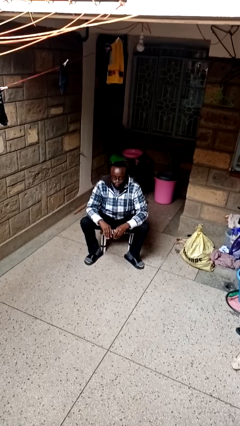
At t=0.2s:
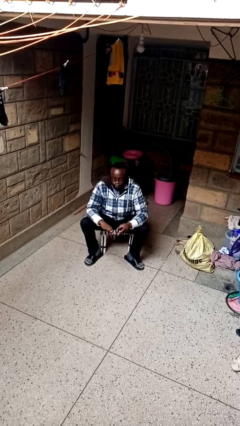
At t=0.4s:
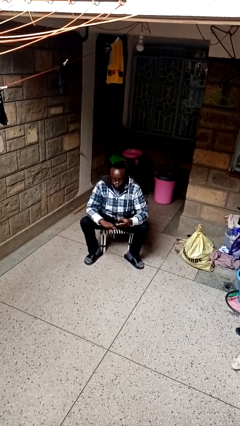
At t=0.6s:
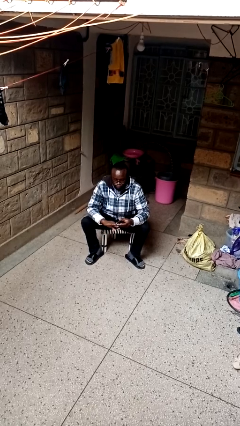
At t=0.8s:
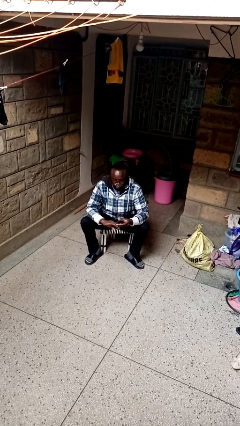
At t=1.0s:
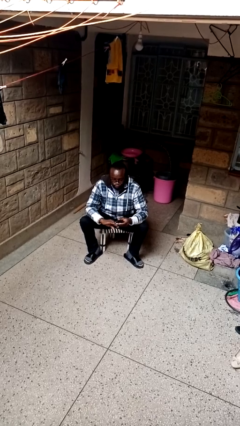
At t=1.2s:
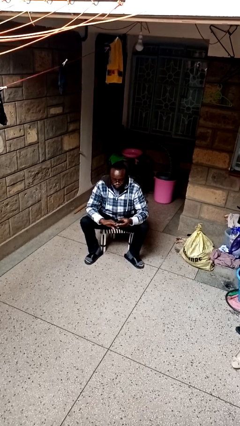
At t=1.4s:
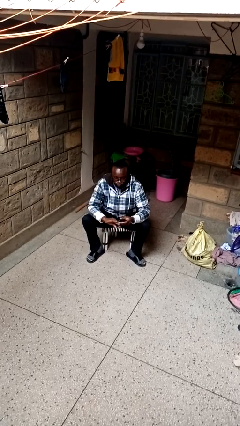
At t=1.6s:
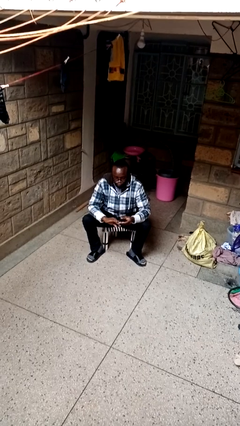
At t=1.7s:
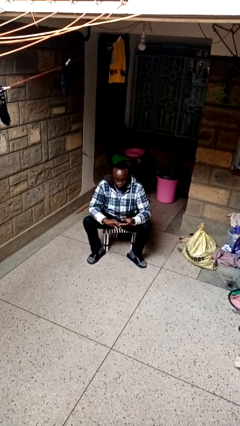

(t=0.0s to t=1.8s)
person clips fingernails

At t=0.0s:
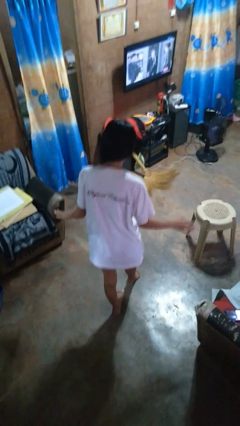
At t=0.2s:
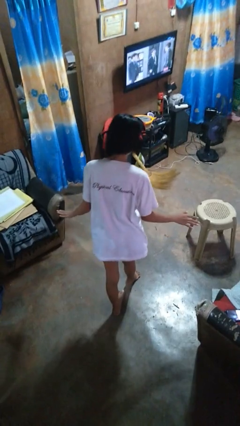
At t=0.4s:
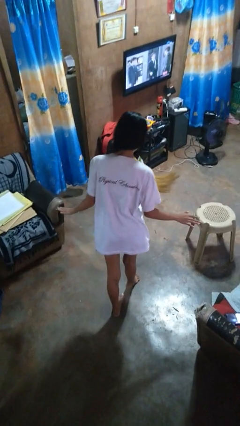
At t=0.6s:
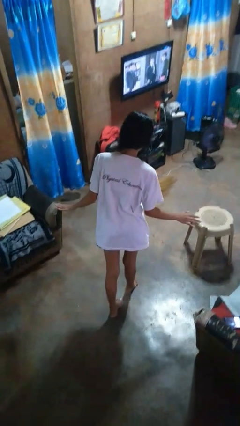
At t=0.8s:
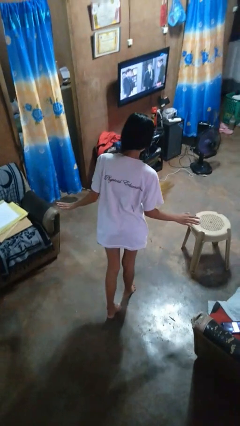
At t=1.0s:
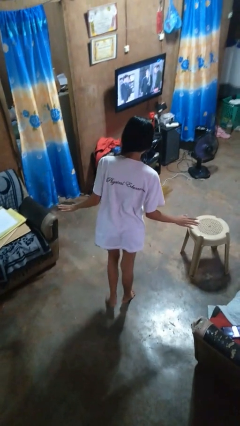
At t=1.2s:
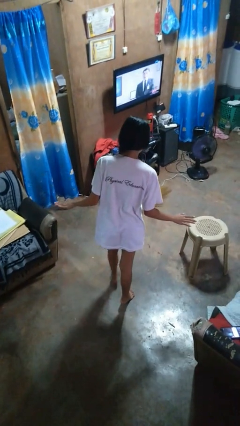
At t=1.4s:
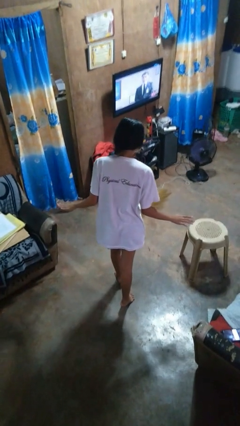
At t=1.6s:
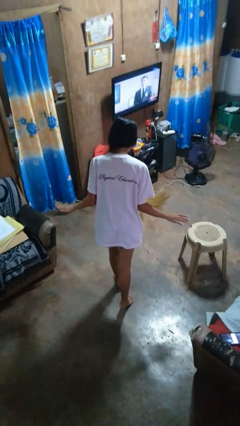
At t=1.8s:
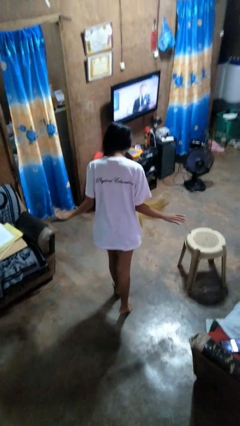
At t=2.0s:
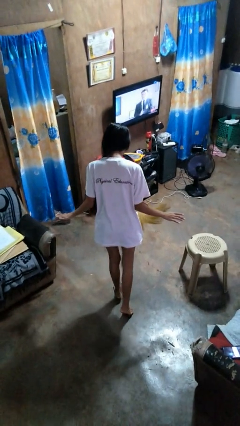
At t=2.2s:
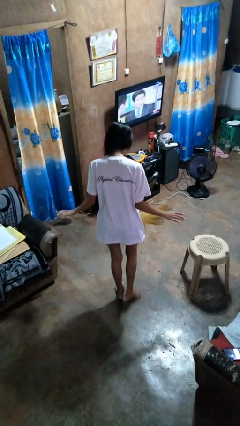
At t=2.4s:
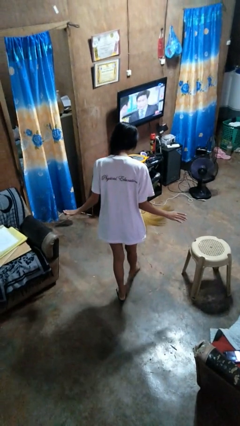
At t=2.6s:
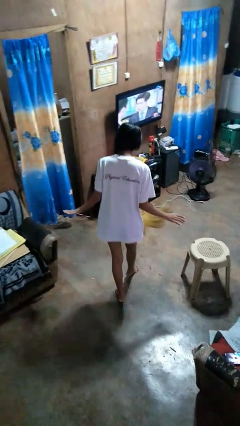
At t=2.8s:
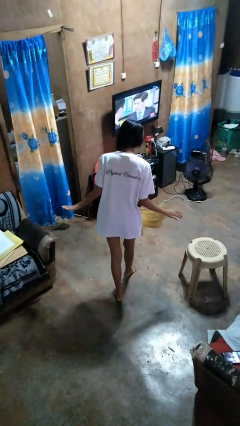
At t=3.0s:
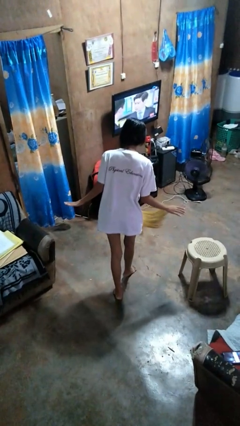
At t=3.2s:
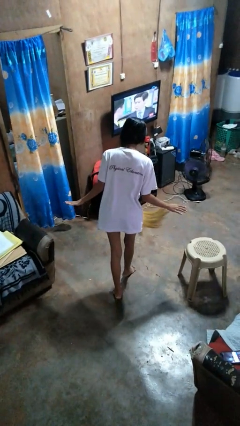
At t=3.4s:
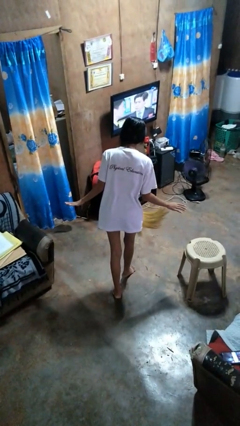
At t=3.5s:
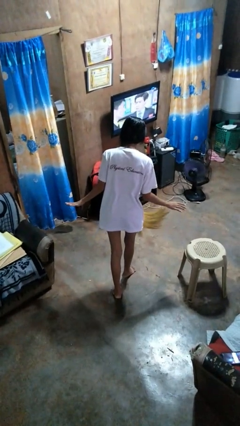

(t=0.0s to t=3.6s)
person walks tiptoe

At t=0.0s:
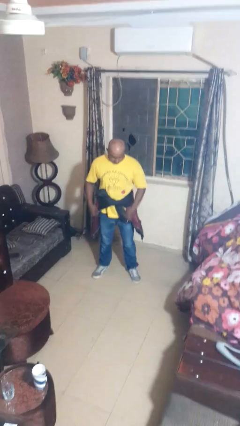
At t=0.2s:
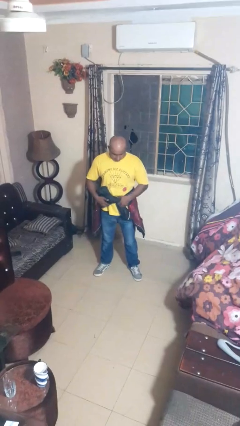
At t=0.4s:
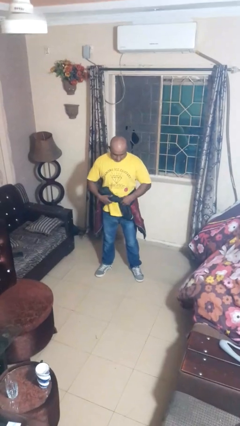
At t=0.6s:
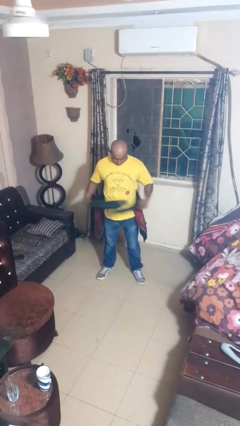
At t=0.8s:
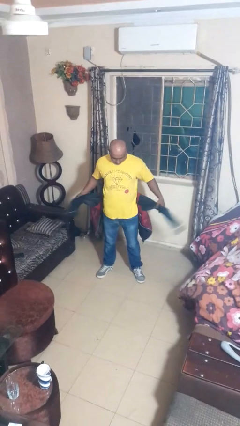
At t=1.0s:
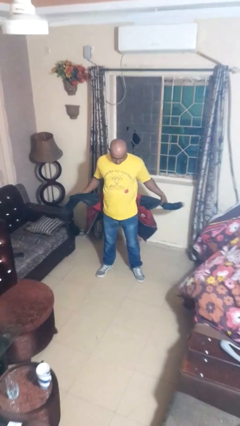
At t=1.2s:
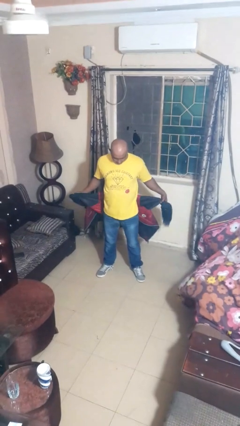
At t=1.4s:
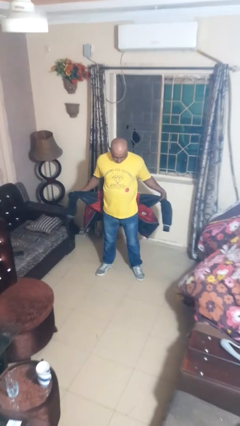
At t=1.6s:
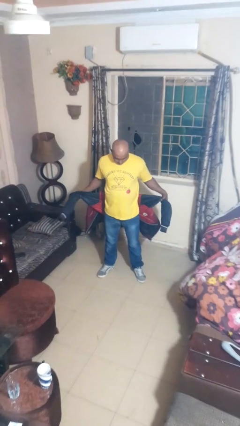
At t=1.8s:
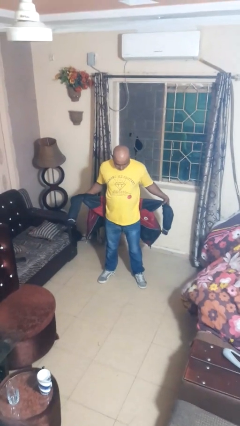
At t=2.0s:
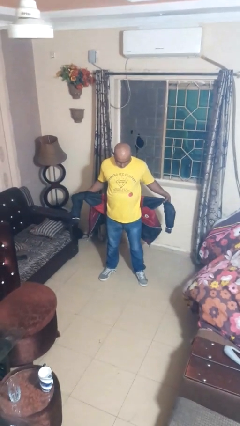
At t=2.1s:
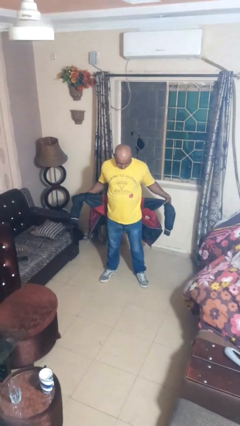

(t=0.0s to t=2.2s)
person unties jacket around waist

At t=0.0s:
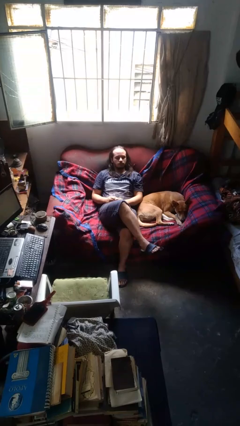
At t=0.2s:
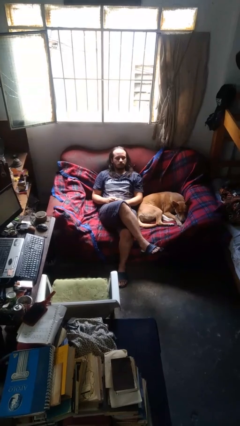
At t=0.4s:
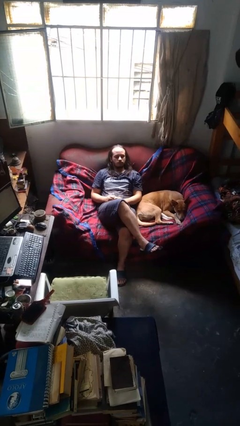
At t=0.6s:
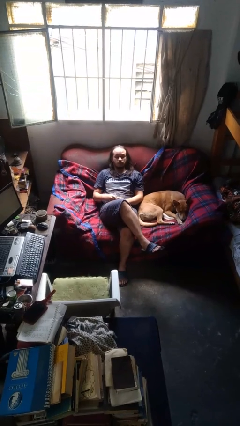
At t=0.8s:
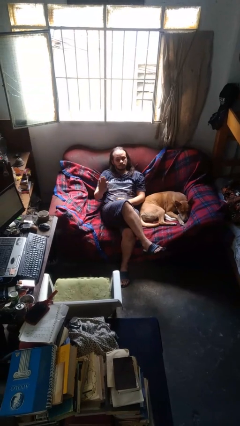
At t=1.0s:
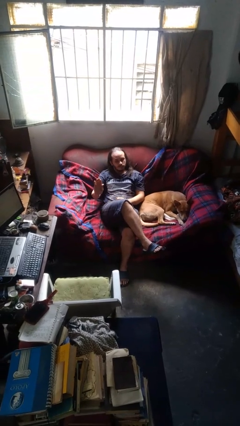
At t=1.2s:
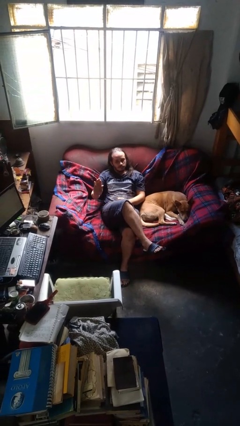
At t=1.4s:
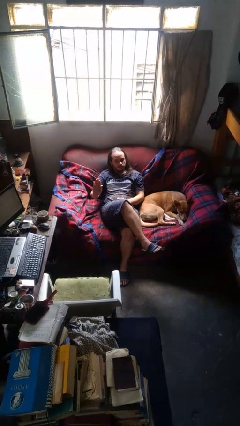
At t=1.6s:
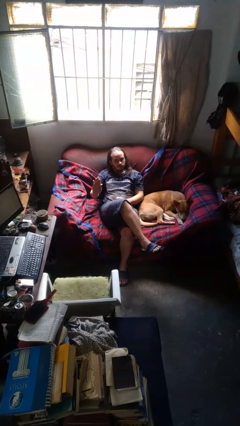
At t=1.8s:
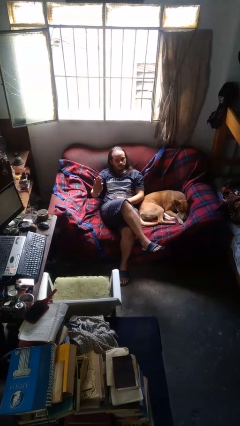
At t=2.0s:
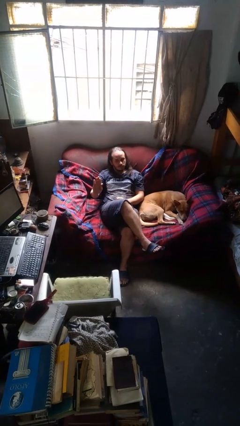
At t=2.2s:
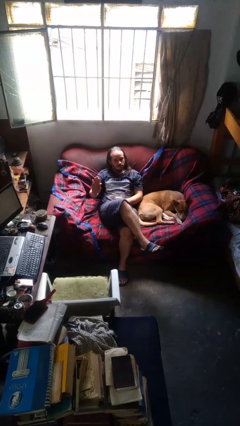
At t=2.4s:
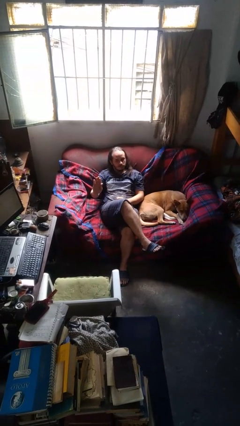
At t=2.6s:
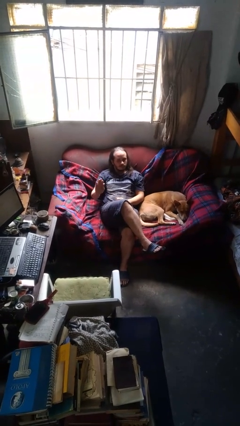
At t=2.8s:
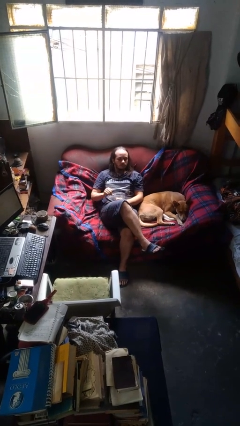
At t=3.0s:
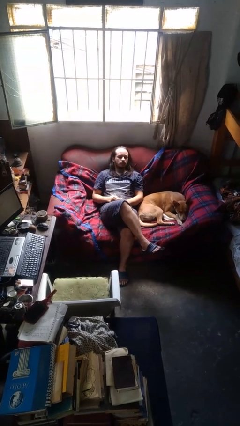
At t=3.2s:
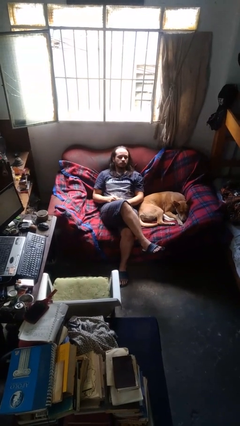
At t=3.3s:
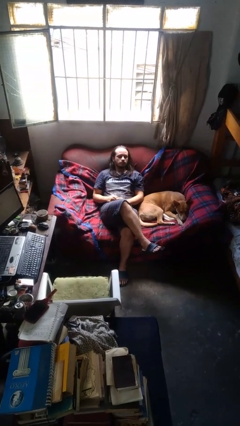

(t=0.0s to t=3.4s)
person gestures stop

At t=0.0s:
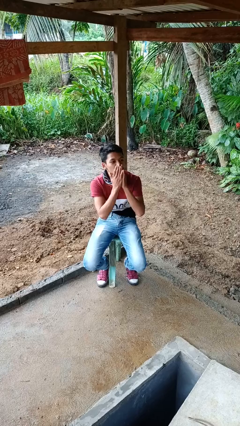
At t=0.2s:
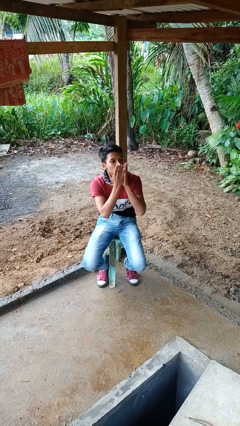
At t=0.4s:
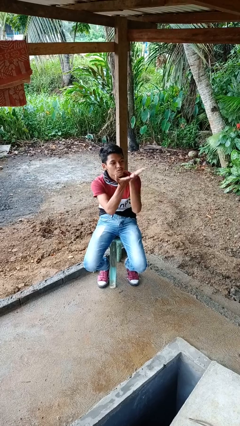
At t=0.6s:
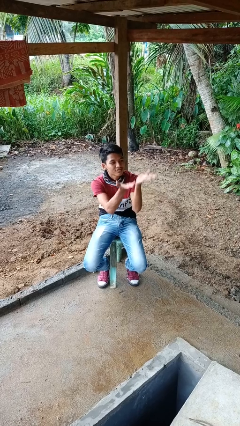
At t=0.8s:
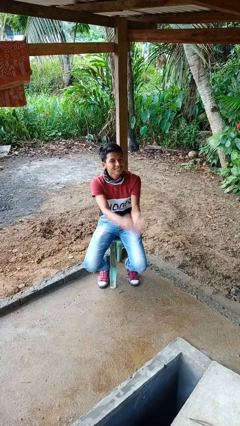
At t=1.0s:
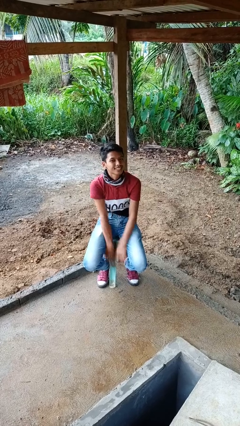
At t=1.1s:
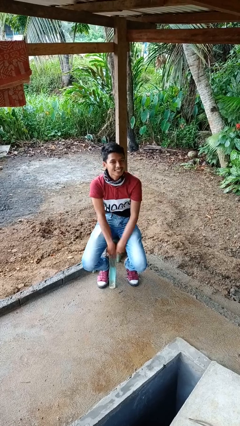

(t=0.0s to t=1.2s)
person gestures blow kiss

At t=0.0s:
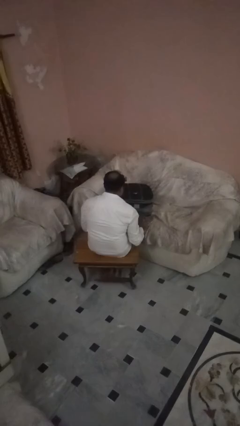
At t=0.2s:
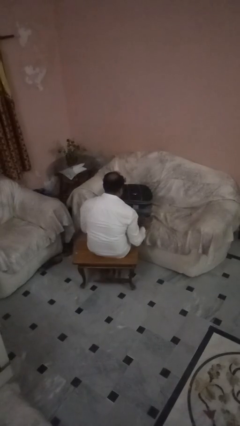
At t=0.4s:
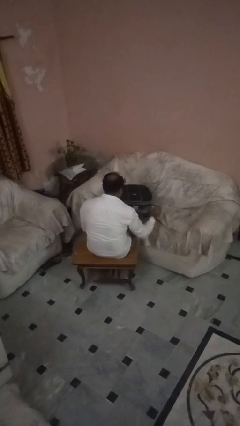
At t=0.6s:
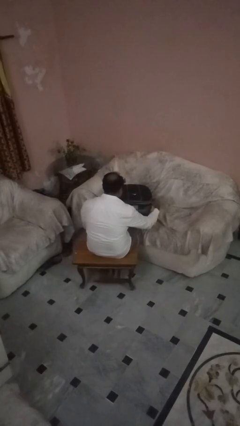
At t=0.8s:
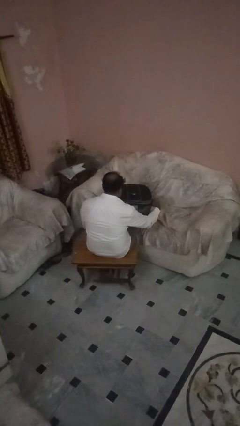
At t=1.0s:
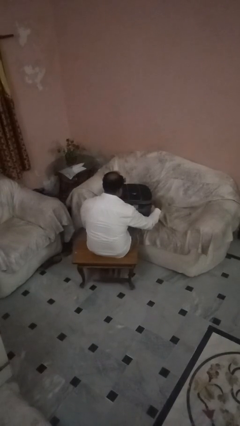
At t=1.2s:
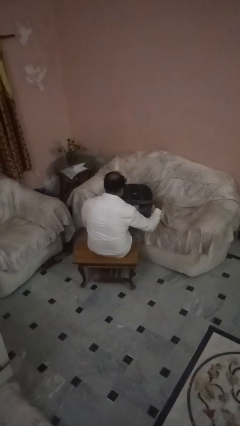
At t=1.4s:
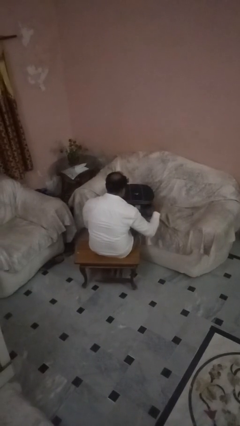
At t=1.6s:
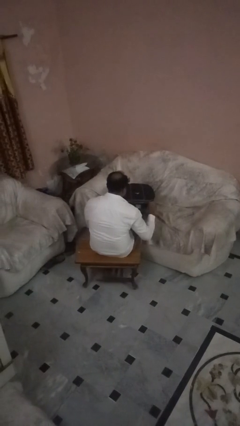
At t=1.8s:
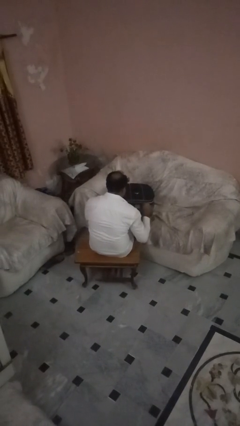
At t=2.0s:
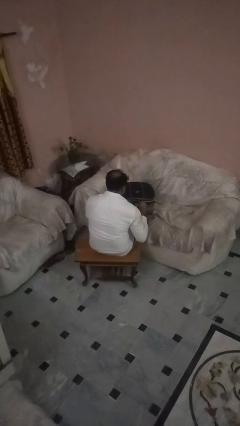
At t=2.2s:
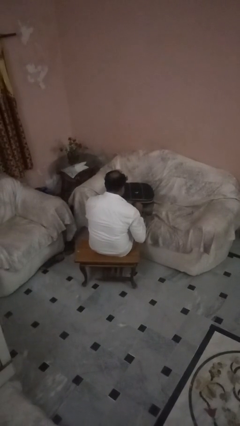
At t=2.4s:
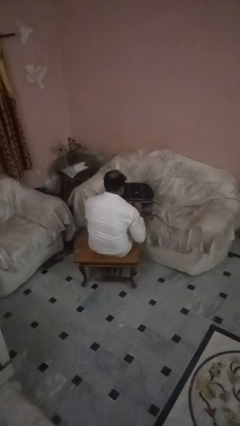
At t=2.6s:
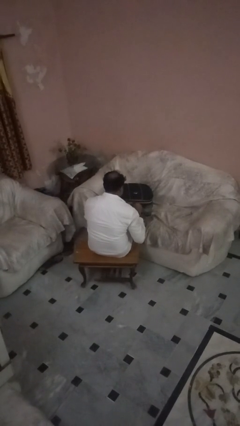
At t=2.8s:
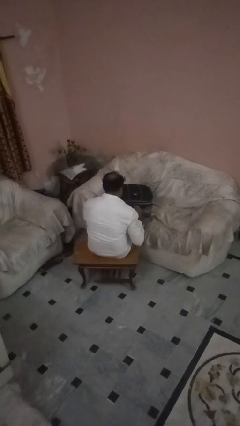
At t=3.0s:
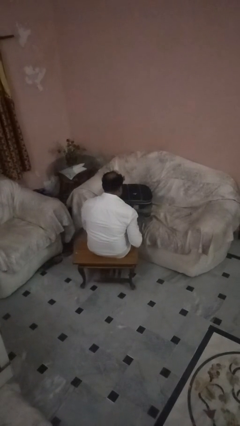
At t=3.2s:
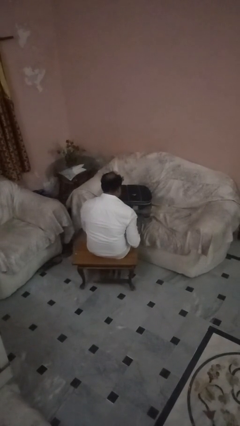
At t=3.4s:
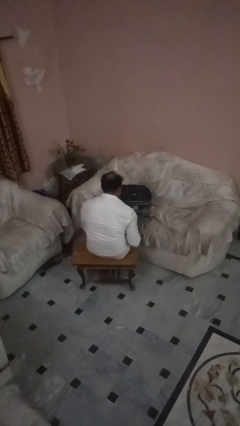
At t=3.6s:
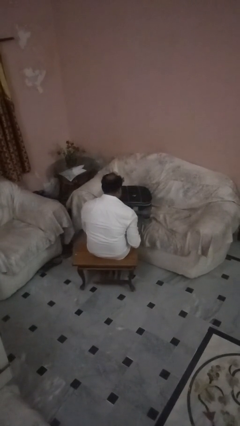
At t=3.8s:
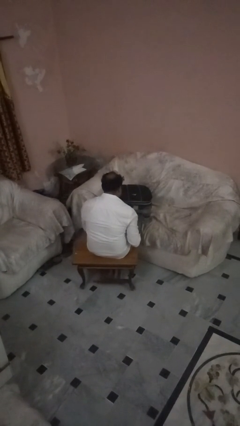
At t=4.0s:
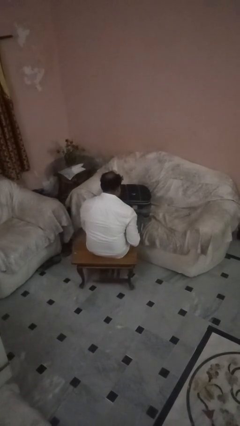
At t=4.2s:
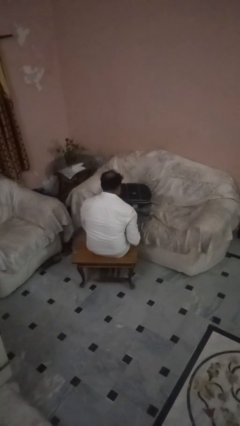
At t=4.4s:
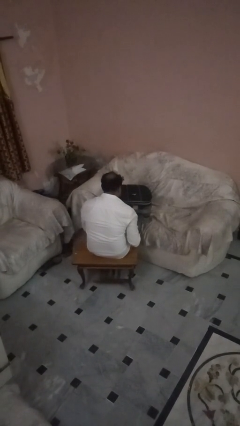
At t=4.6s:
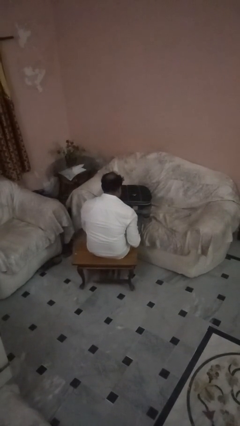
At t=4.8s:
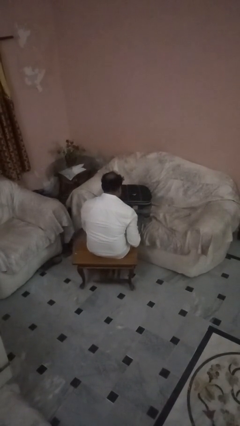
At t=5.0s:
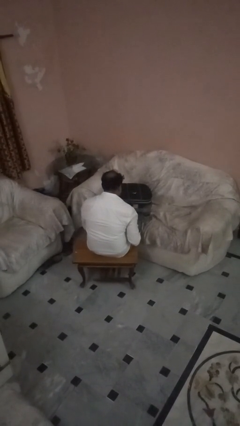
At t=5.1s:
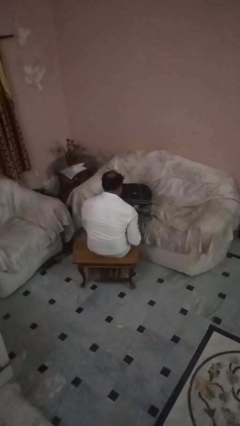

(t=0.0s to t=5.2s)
person closes suitcase
